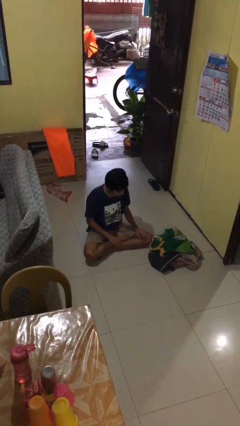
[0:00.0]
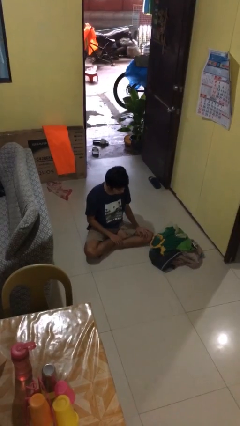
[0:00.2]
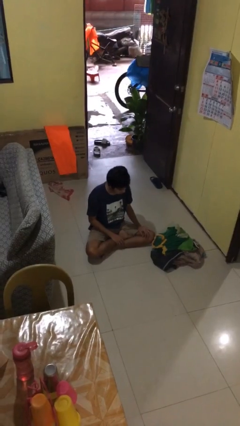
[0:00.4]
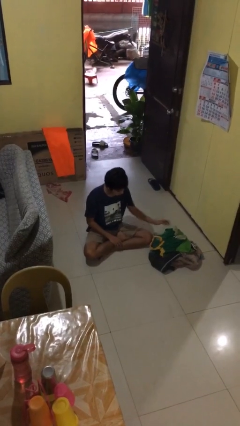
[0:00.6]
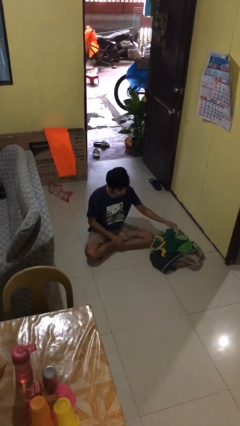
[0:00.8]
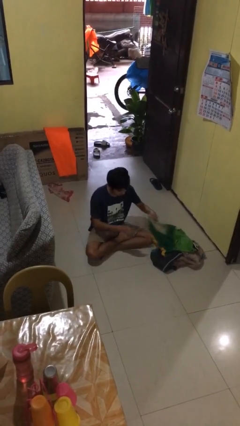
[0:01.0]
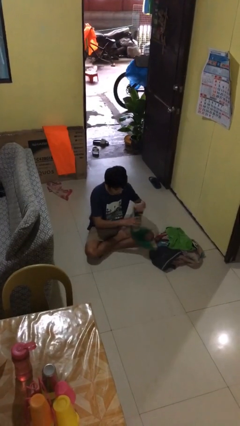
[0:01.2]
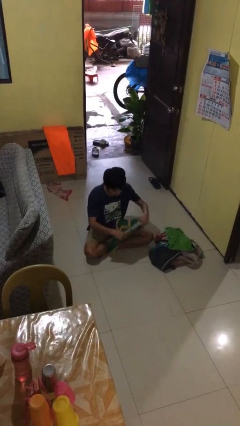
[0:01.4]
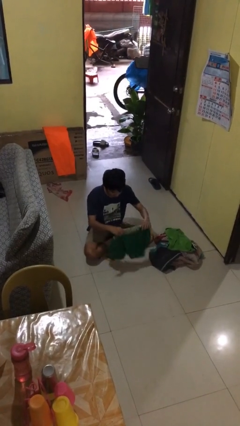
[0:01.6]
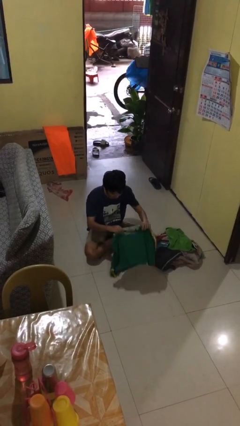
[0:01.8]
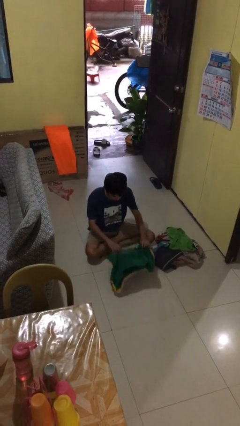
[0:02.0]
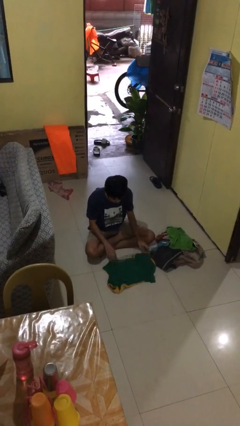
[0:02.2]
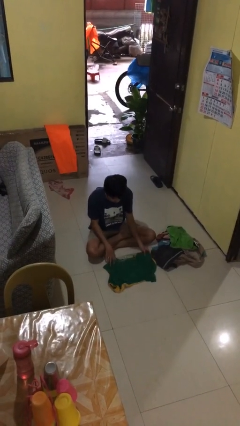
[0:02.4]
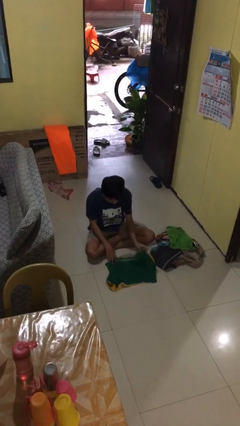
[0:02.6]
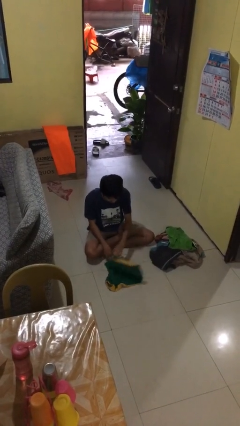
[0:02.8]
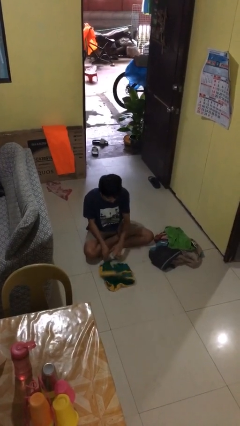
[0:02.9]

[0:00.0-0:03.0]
person folds shirt

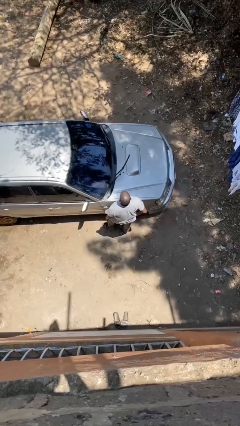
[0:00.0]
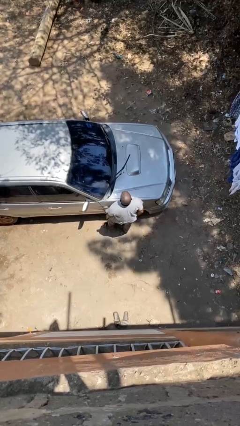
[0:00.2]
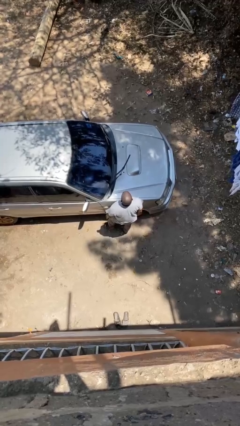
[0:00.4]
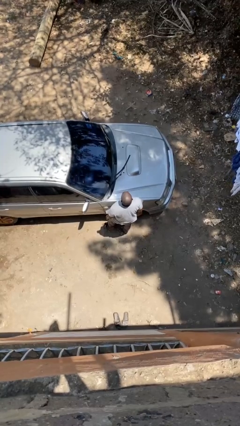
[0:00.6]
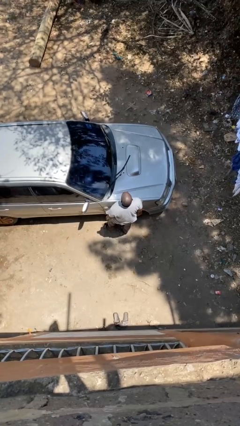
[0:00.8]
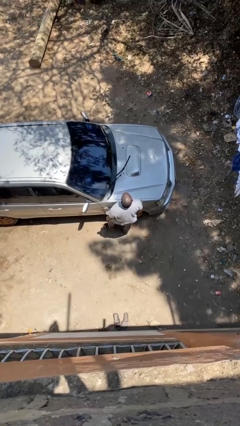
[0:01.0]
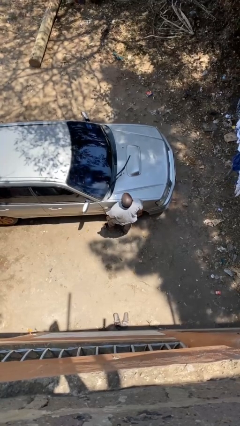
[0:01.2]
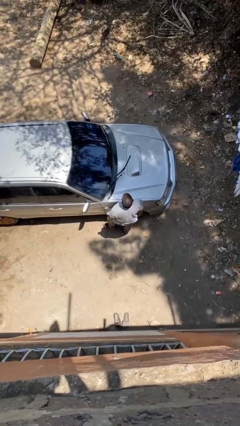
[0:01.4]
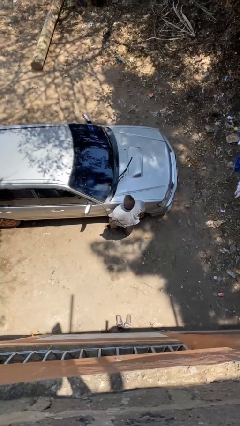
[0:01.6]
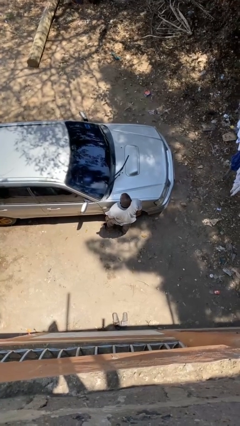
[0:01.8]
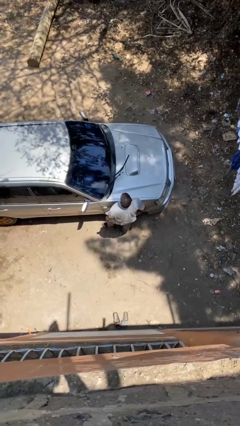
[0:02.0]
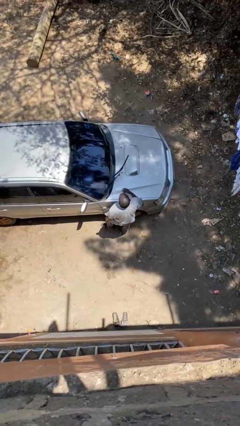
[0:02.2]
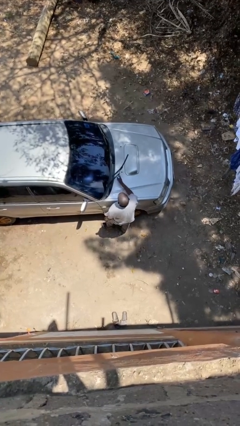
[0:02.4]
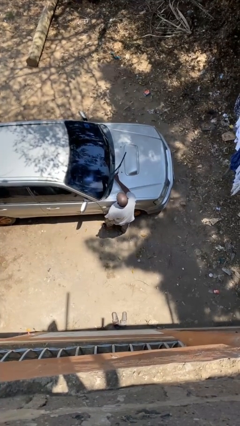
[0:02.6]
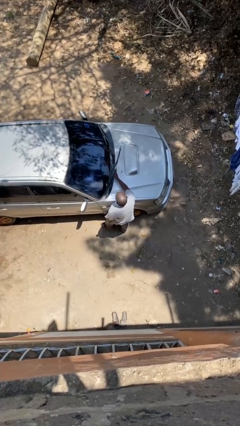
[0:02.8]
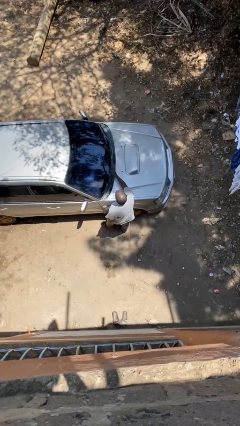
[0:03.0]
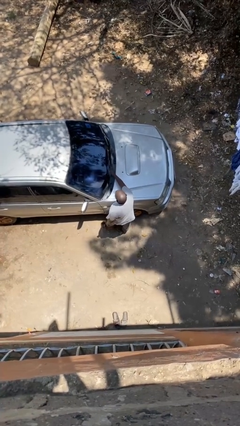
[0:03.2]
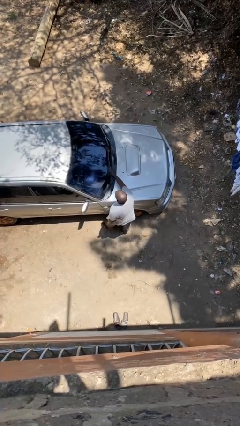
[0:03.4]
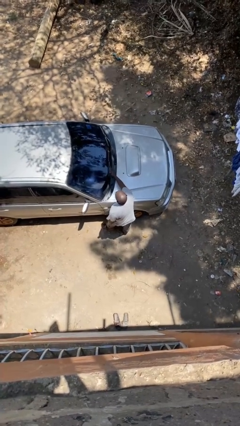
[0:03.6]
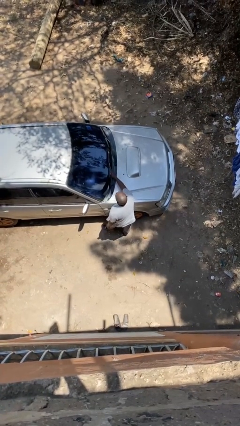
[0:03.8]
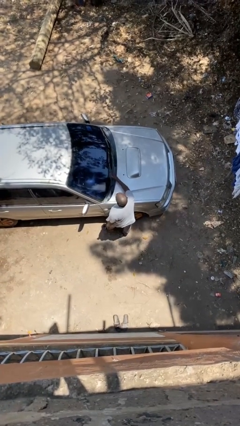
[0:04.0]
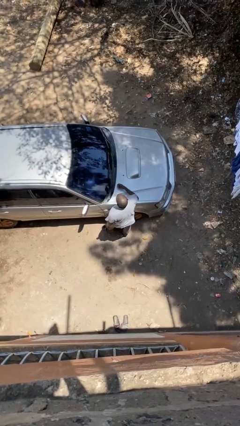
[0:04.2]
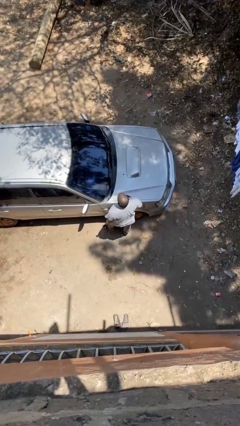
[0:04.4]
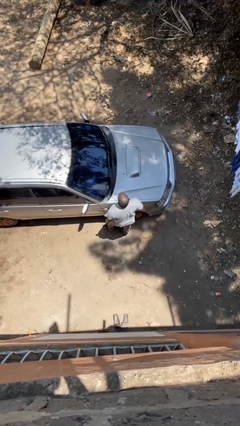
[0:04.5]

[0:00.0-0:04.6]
person flips down car wipers

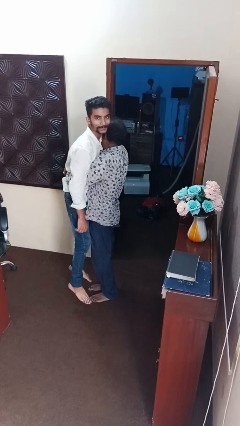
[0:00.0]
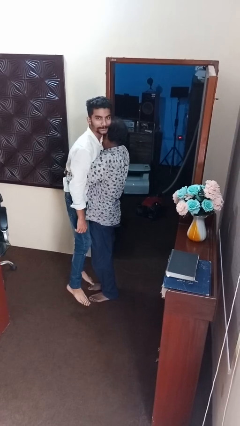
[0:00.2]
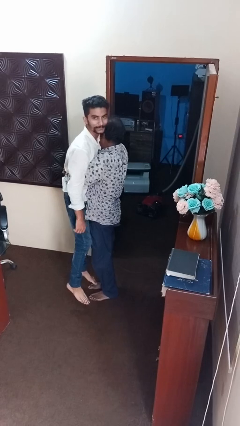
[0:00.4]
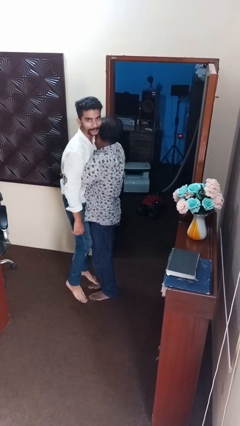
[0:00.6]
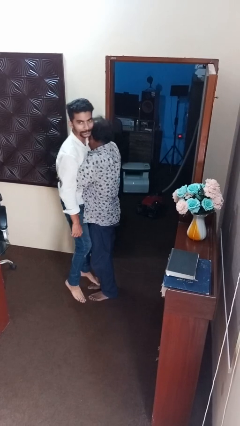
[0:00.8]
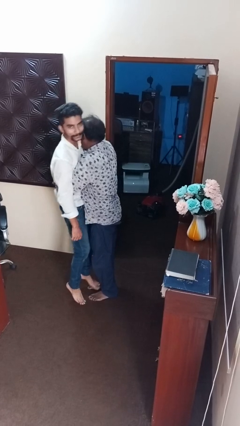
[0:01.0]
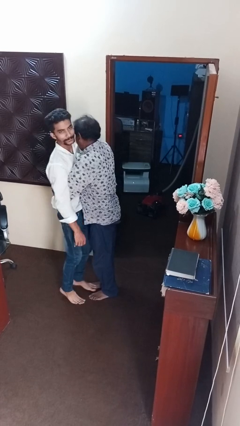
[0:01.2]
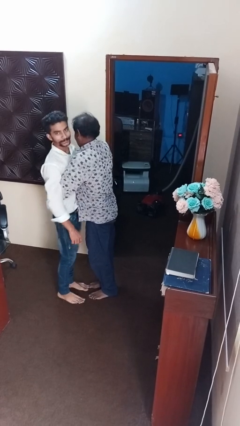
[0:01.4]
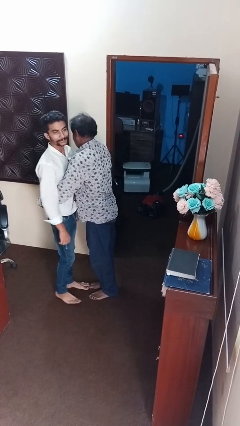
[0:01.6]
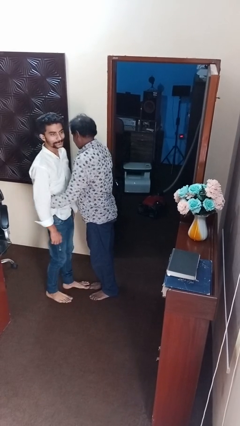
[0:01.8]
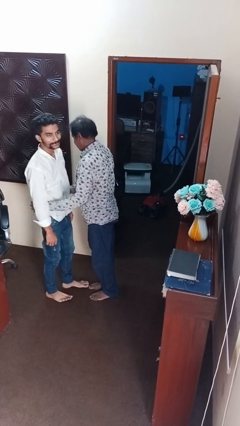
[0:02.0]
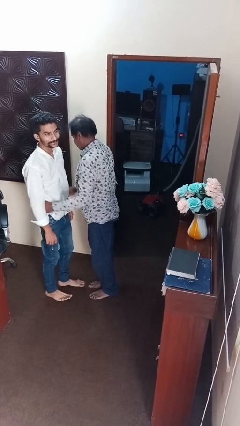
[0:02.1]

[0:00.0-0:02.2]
person puts down person

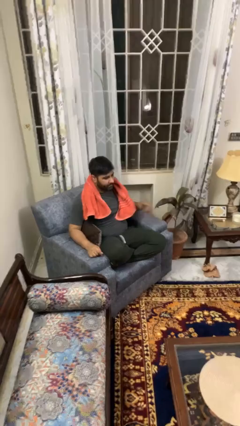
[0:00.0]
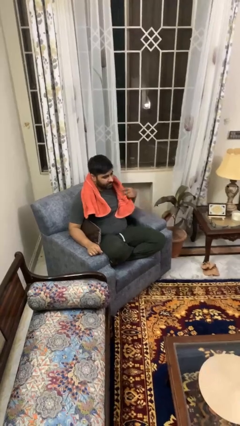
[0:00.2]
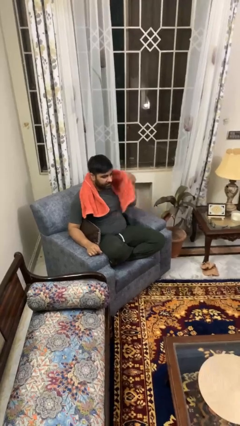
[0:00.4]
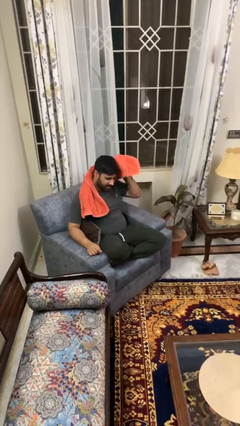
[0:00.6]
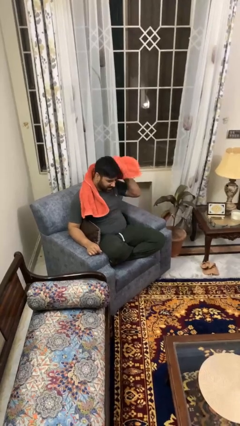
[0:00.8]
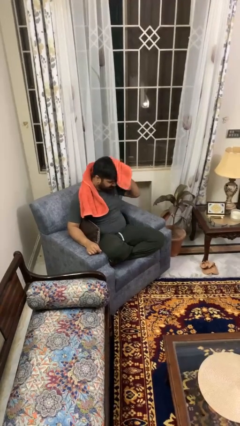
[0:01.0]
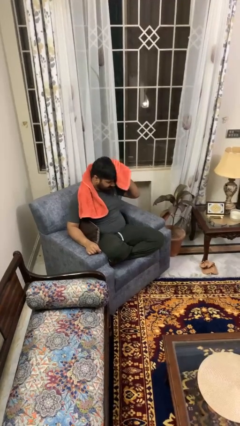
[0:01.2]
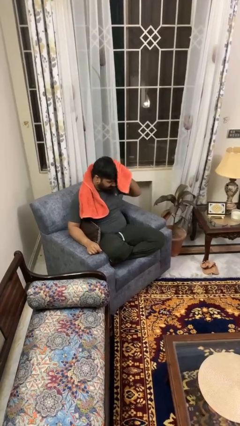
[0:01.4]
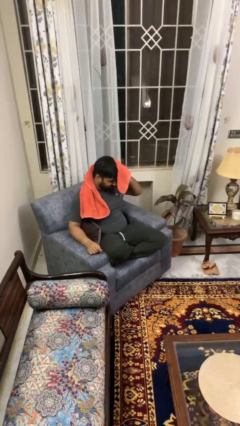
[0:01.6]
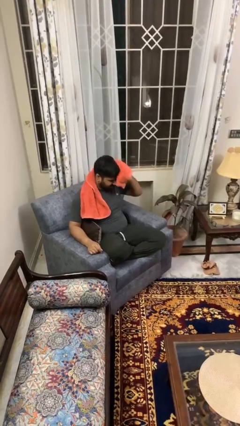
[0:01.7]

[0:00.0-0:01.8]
person dries hair with towel

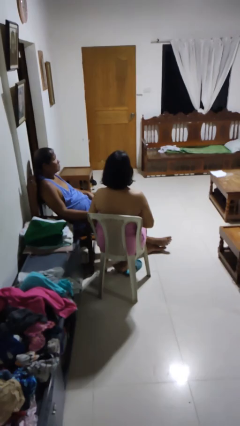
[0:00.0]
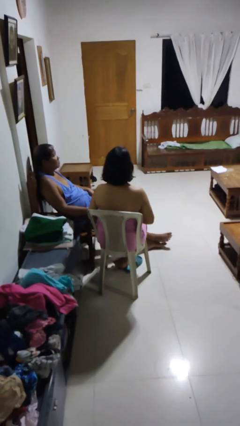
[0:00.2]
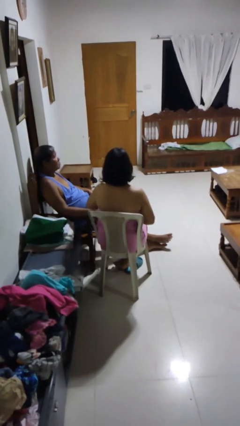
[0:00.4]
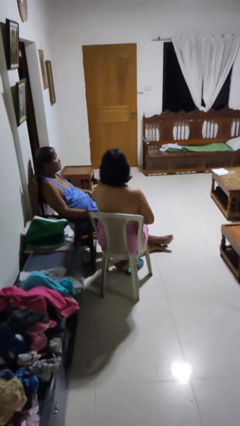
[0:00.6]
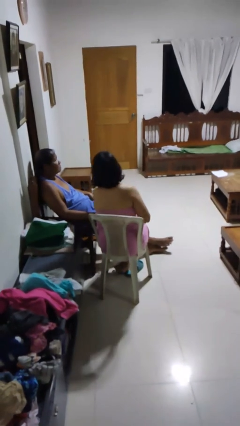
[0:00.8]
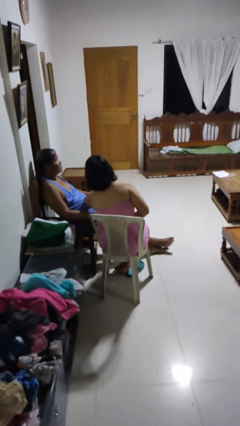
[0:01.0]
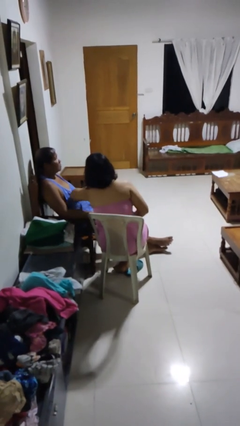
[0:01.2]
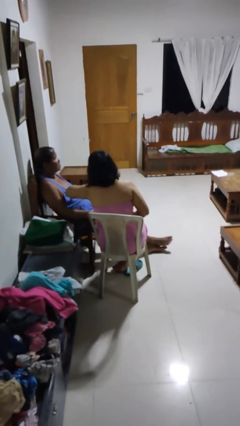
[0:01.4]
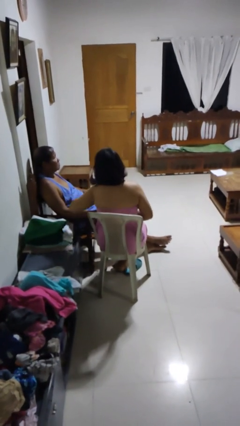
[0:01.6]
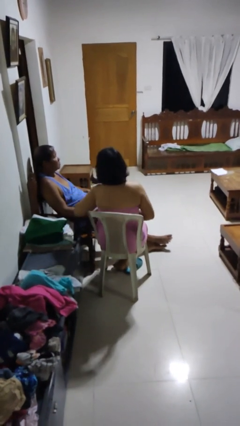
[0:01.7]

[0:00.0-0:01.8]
person nudges person with elbow

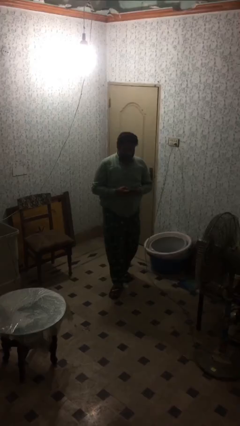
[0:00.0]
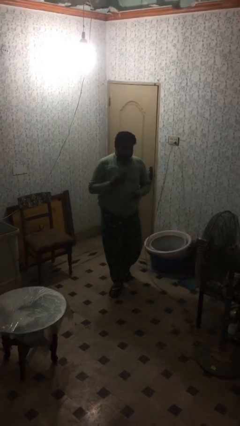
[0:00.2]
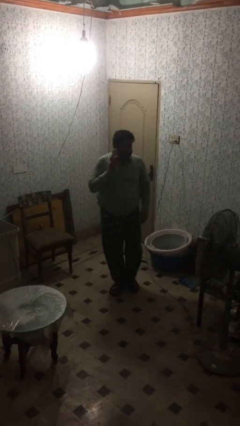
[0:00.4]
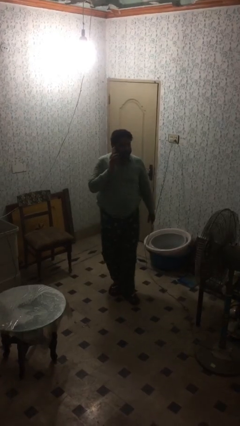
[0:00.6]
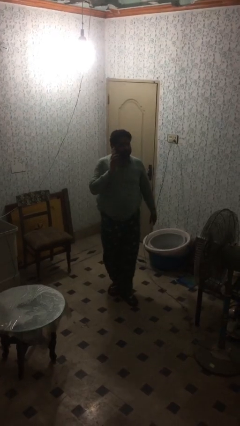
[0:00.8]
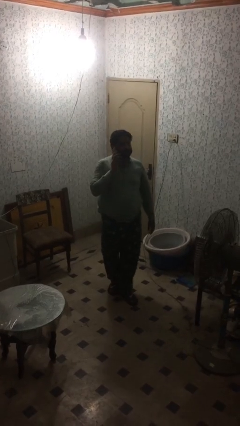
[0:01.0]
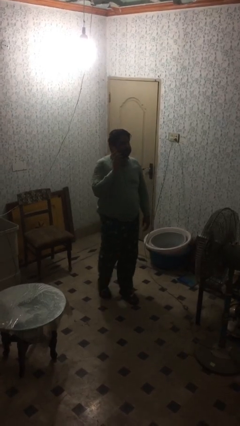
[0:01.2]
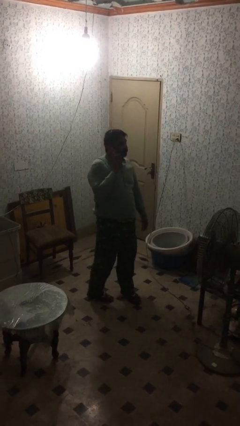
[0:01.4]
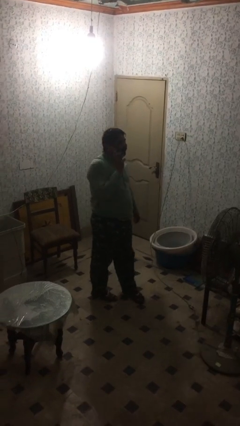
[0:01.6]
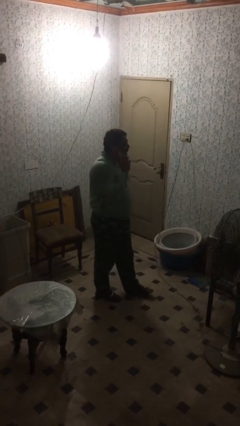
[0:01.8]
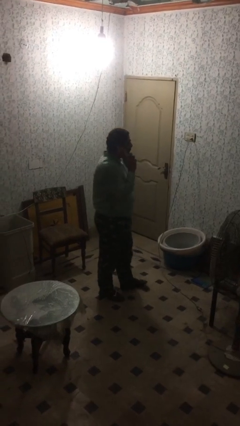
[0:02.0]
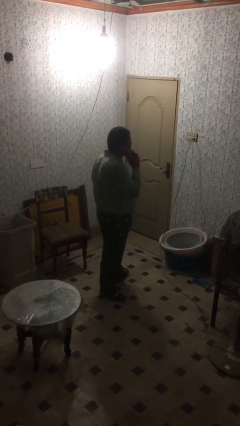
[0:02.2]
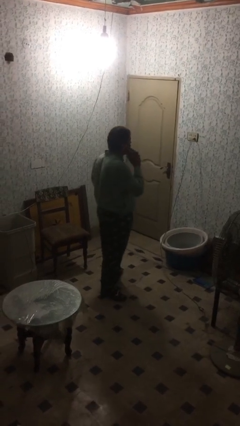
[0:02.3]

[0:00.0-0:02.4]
person talks on phone

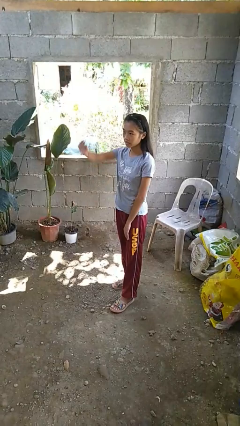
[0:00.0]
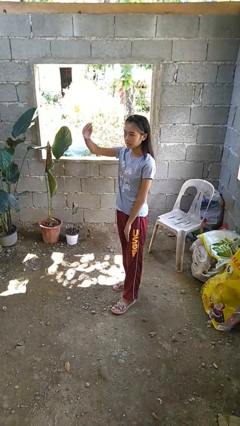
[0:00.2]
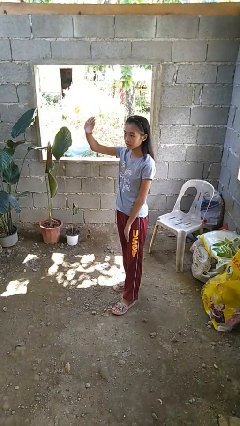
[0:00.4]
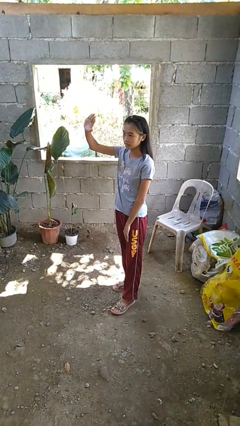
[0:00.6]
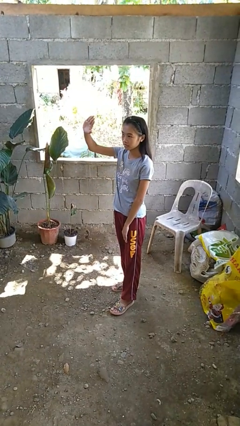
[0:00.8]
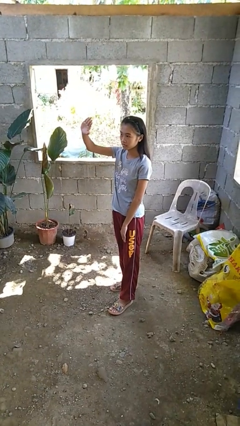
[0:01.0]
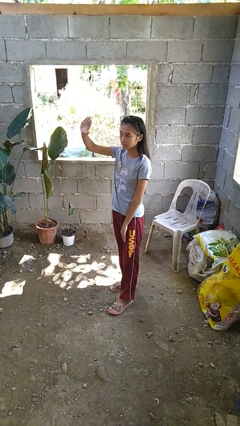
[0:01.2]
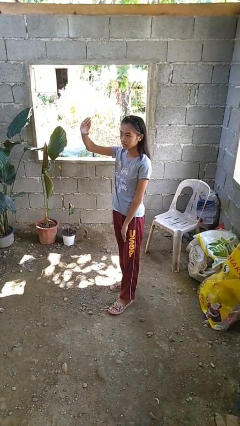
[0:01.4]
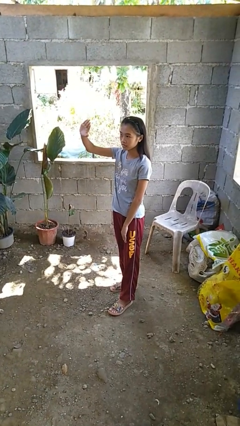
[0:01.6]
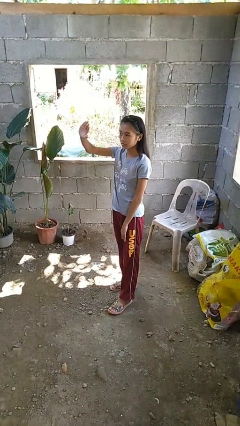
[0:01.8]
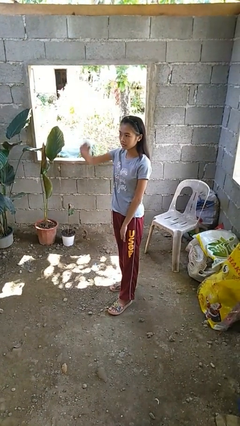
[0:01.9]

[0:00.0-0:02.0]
person gestures swipe up
